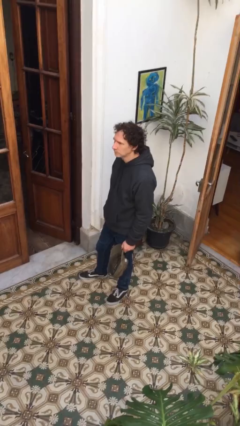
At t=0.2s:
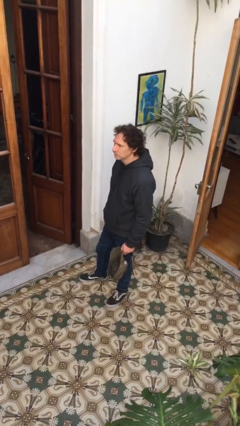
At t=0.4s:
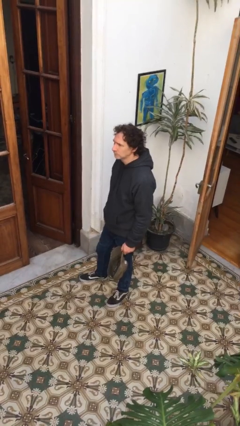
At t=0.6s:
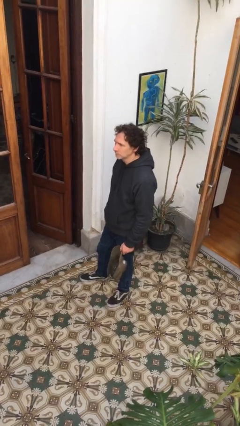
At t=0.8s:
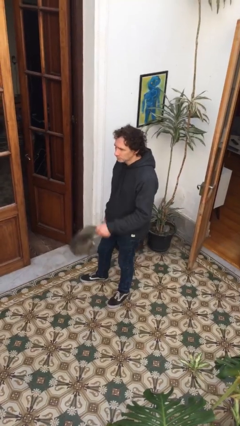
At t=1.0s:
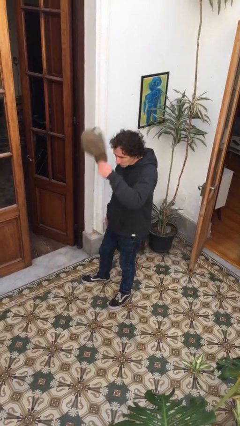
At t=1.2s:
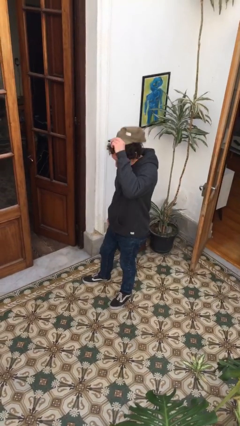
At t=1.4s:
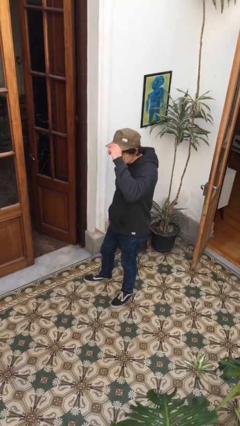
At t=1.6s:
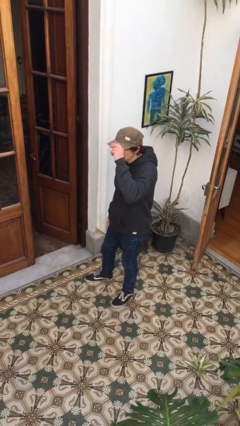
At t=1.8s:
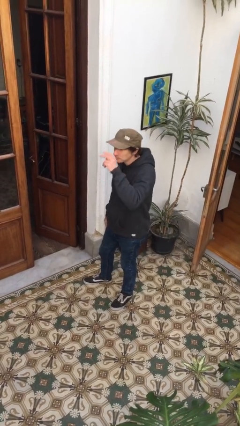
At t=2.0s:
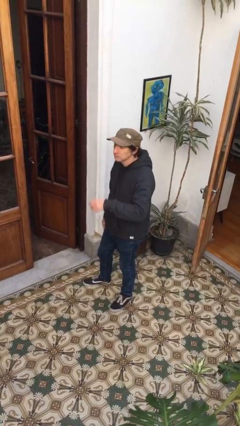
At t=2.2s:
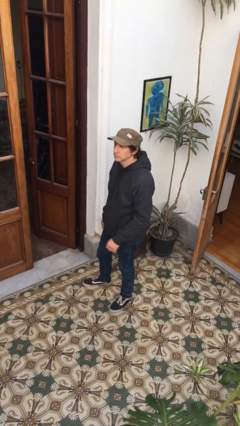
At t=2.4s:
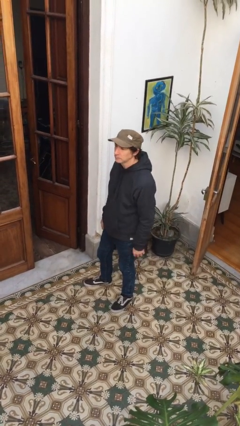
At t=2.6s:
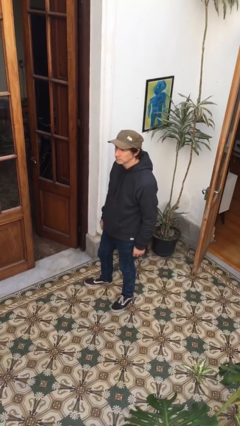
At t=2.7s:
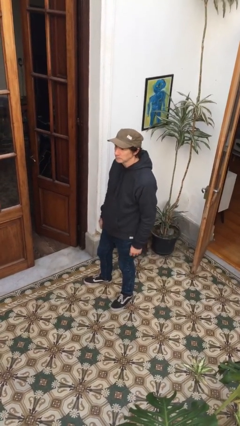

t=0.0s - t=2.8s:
person puts on hat

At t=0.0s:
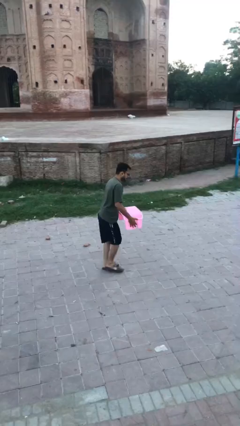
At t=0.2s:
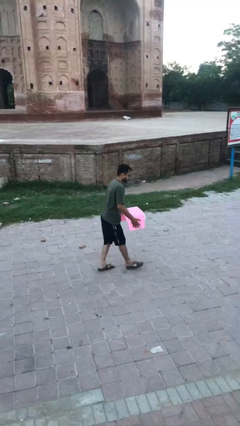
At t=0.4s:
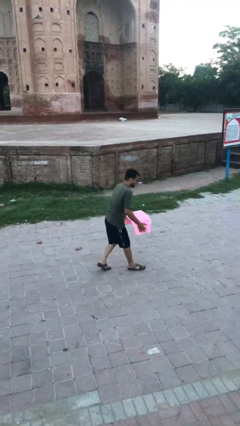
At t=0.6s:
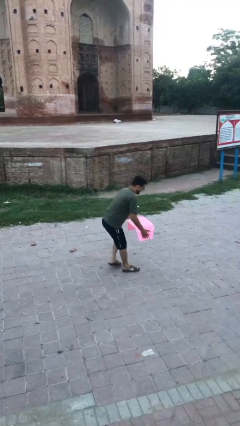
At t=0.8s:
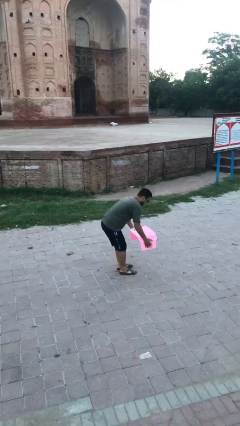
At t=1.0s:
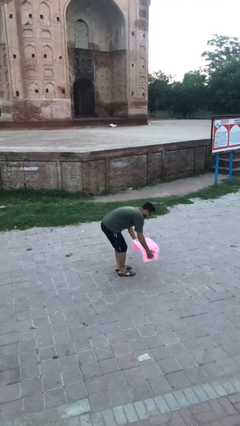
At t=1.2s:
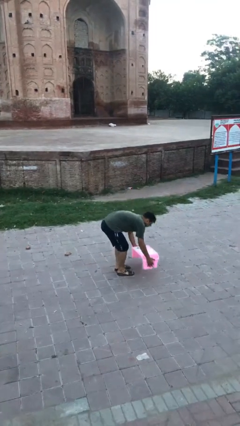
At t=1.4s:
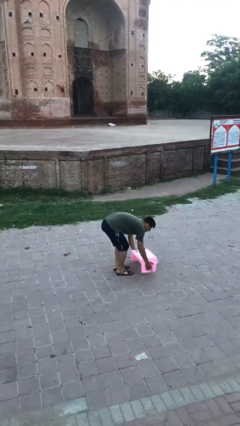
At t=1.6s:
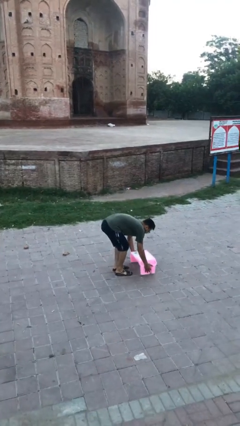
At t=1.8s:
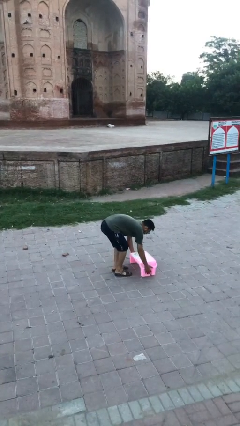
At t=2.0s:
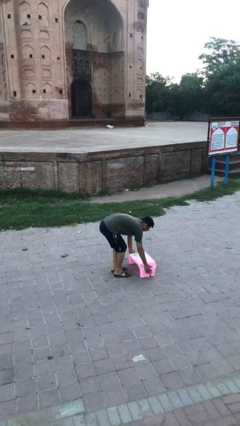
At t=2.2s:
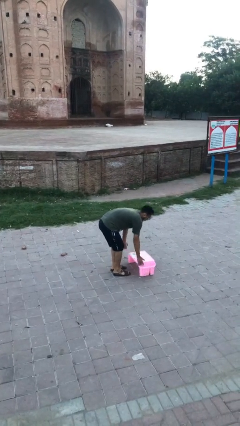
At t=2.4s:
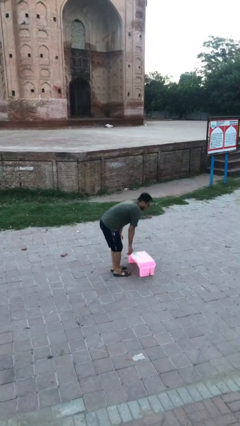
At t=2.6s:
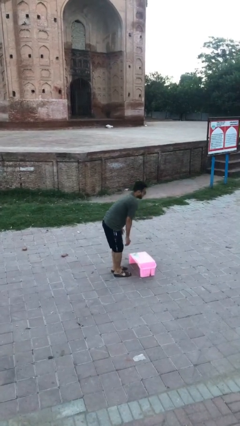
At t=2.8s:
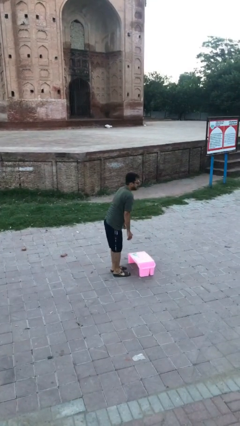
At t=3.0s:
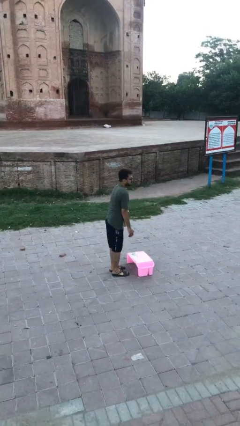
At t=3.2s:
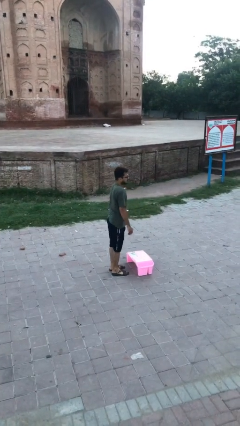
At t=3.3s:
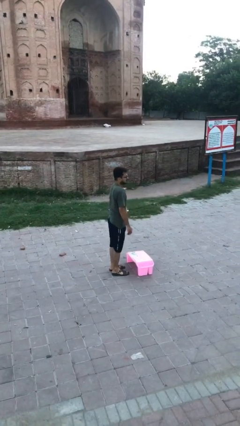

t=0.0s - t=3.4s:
person puts down object on floor

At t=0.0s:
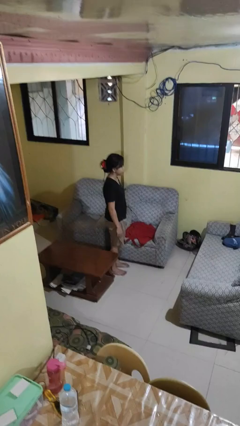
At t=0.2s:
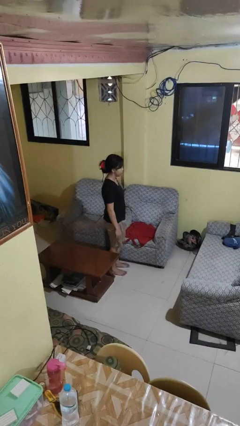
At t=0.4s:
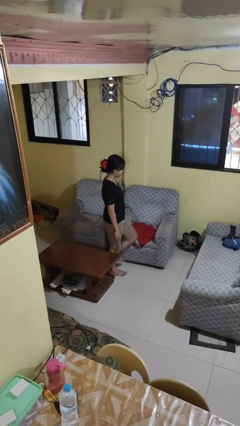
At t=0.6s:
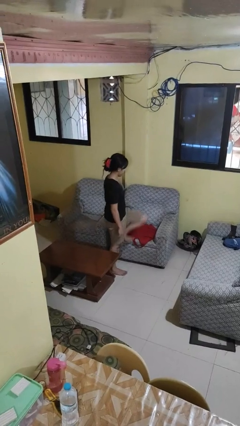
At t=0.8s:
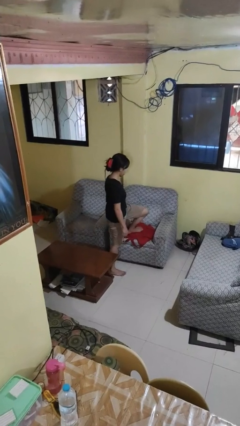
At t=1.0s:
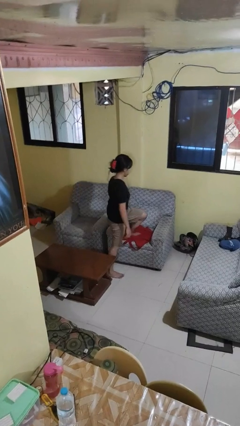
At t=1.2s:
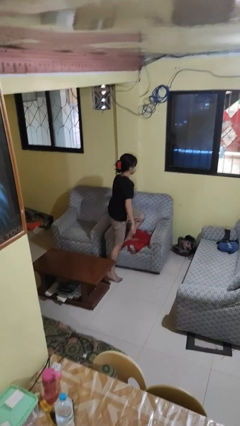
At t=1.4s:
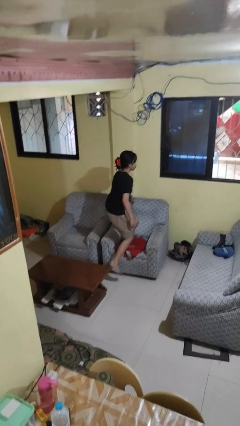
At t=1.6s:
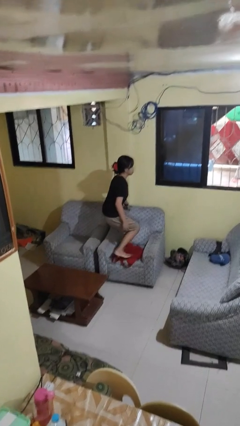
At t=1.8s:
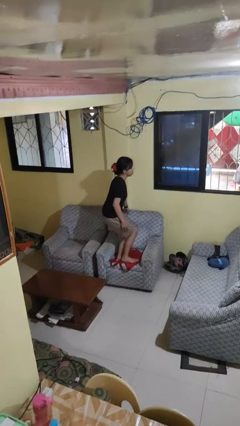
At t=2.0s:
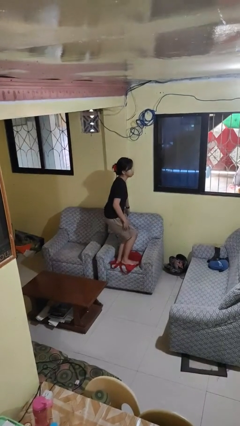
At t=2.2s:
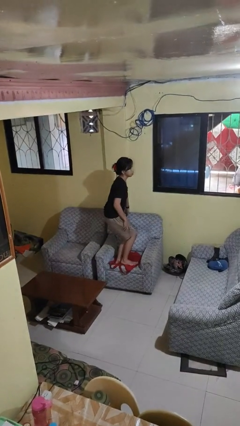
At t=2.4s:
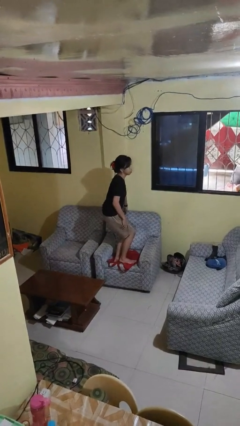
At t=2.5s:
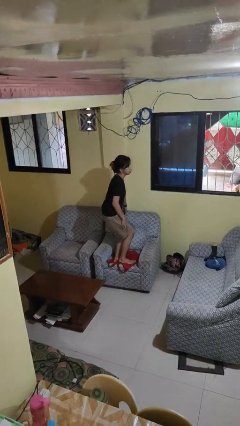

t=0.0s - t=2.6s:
person climbs on couch

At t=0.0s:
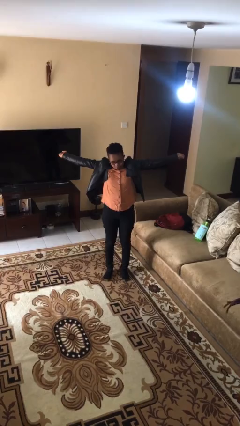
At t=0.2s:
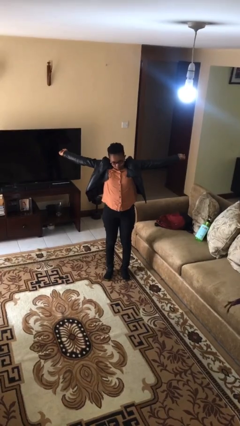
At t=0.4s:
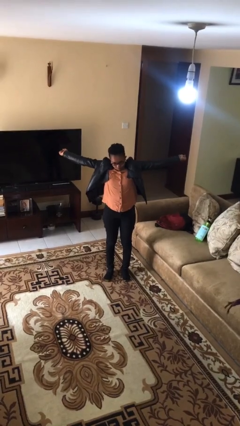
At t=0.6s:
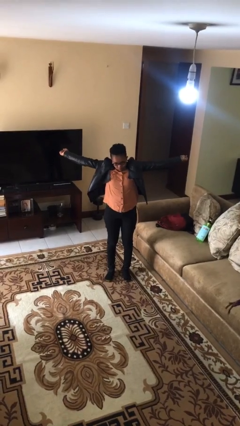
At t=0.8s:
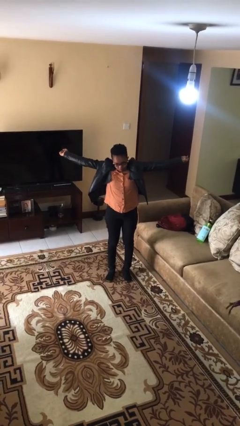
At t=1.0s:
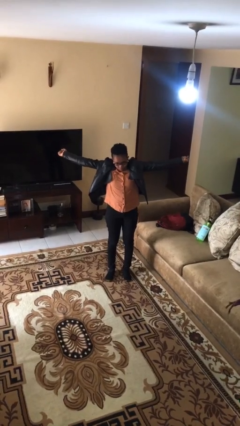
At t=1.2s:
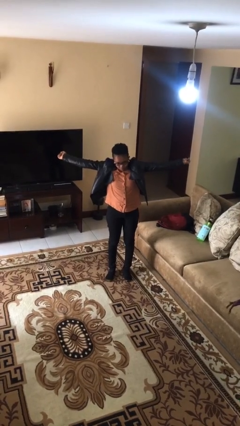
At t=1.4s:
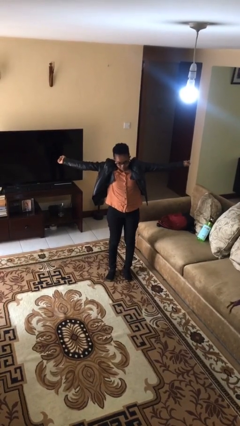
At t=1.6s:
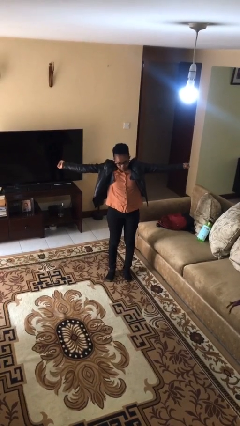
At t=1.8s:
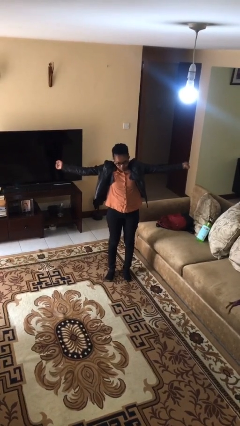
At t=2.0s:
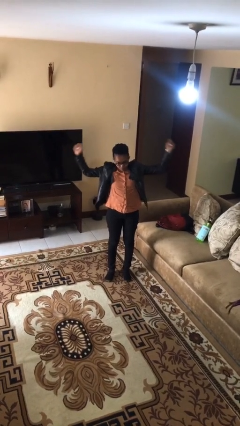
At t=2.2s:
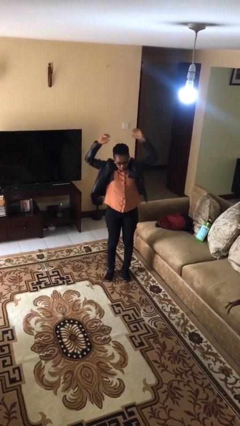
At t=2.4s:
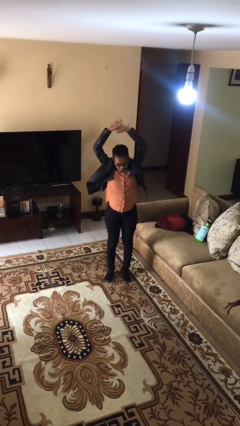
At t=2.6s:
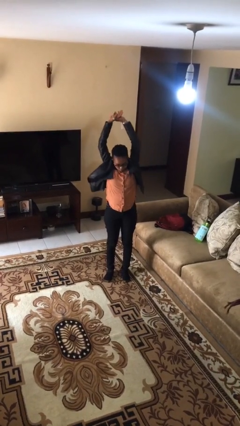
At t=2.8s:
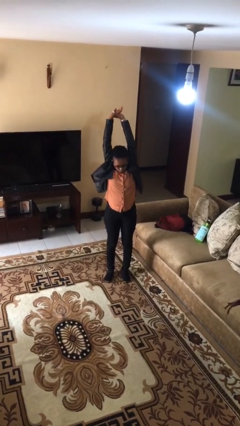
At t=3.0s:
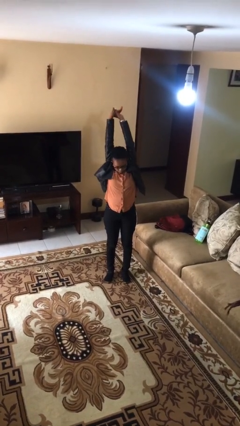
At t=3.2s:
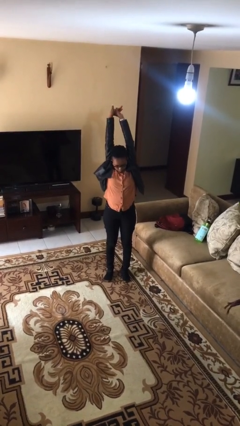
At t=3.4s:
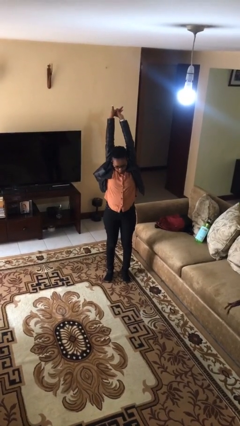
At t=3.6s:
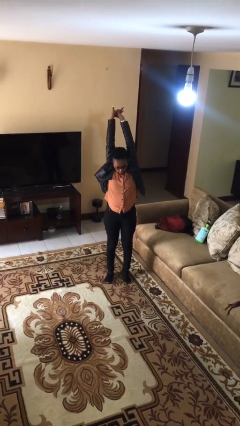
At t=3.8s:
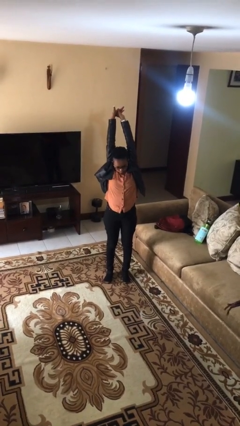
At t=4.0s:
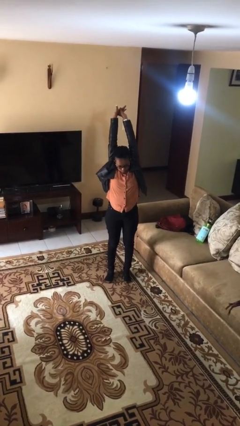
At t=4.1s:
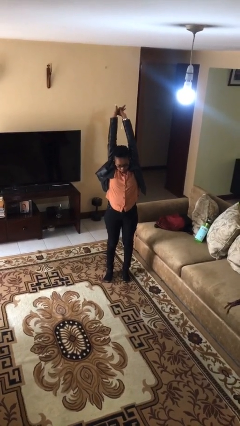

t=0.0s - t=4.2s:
person stretches arms over head

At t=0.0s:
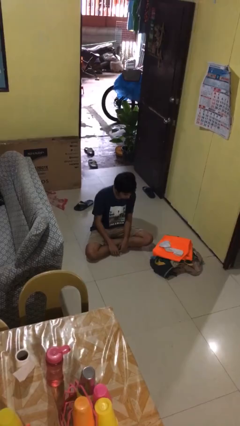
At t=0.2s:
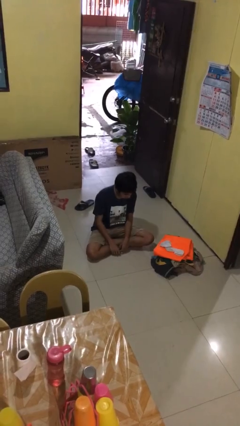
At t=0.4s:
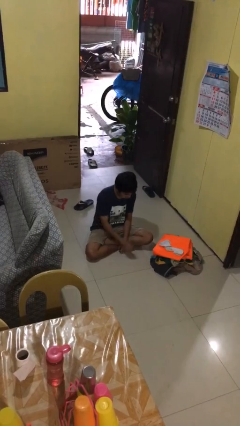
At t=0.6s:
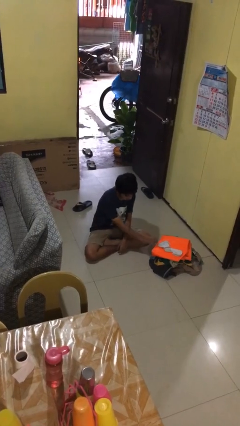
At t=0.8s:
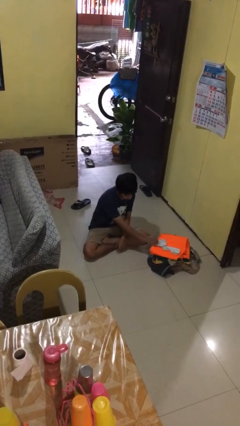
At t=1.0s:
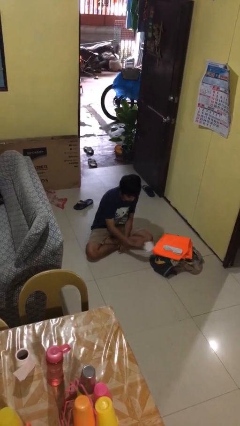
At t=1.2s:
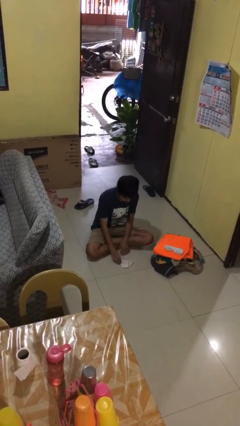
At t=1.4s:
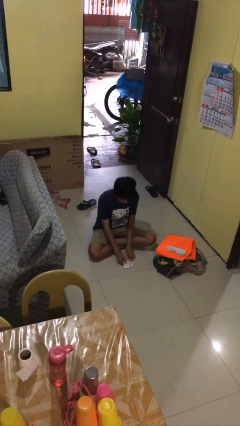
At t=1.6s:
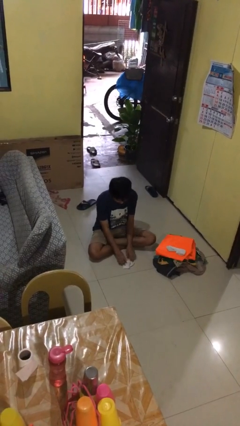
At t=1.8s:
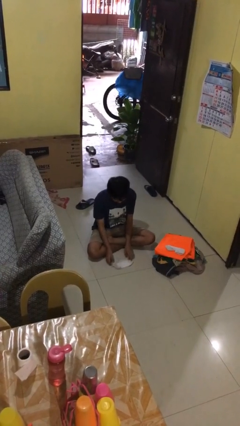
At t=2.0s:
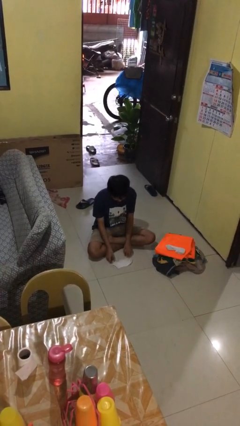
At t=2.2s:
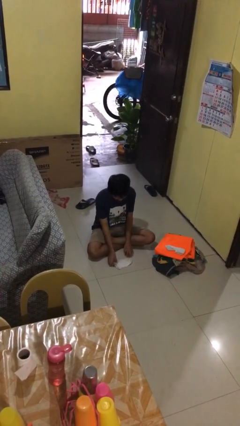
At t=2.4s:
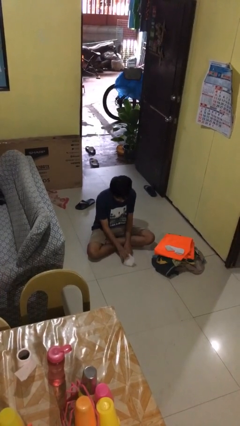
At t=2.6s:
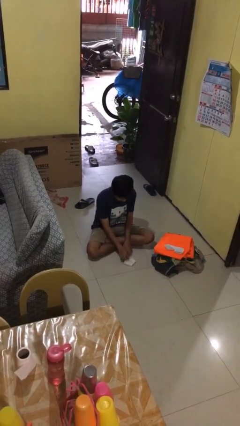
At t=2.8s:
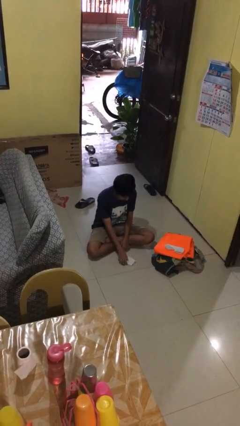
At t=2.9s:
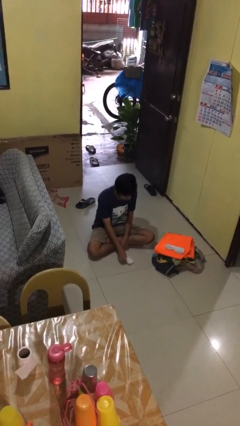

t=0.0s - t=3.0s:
person folds socks

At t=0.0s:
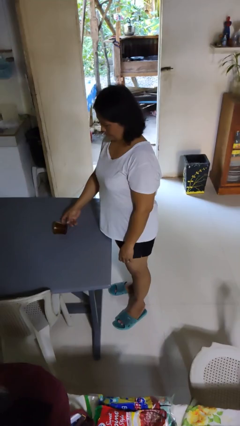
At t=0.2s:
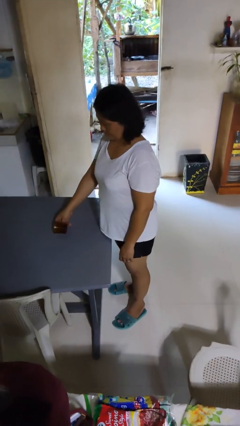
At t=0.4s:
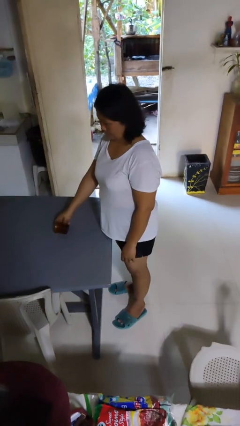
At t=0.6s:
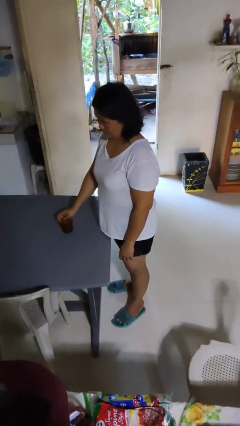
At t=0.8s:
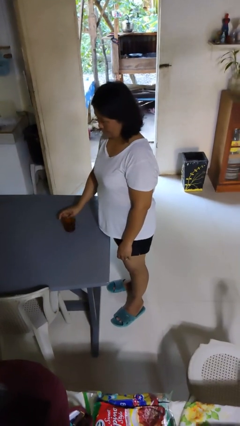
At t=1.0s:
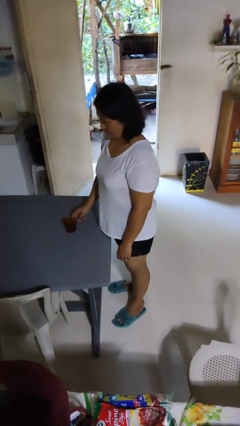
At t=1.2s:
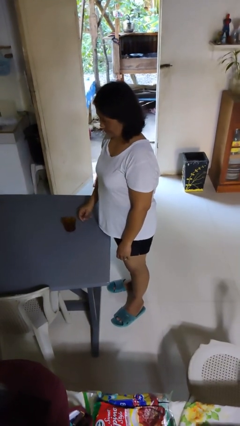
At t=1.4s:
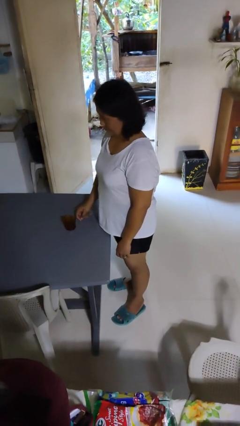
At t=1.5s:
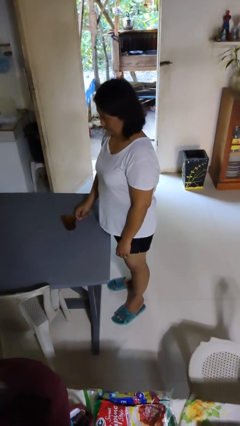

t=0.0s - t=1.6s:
person sets upright glass
